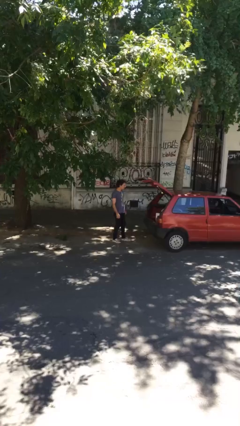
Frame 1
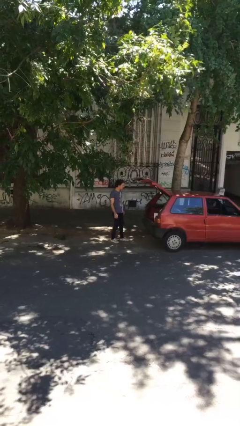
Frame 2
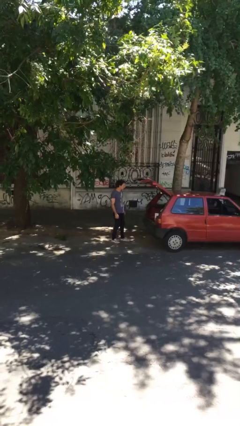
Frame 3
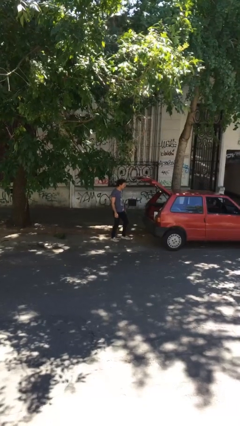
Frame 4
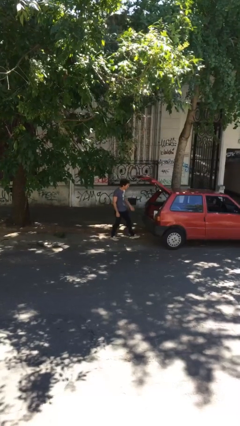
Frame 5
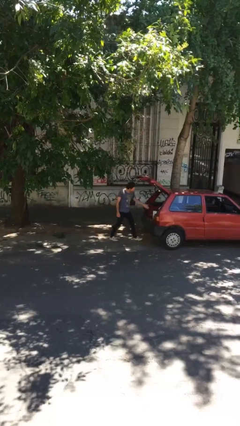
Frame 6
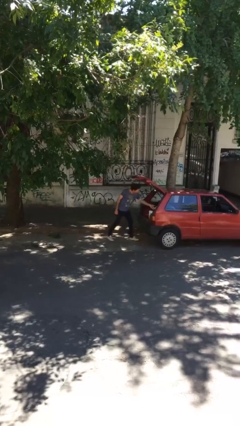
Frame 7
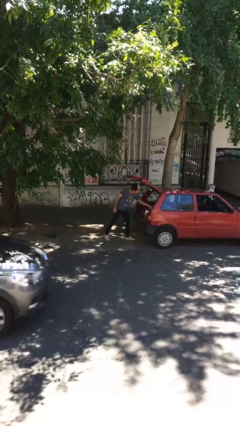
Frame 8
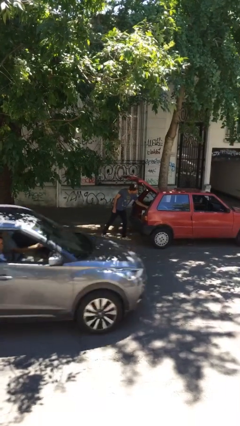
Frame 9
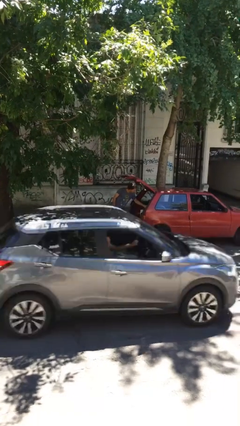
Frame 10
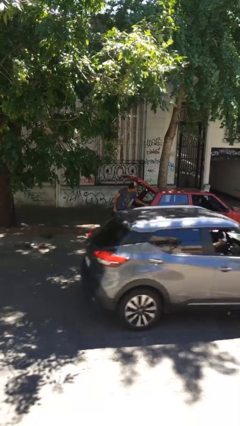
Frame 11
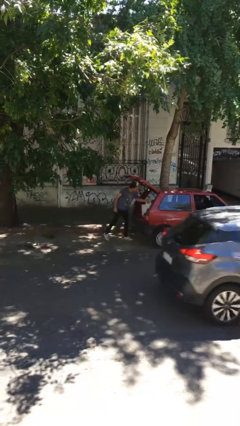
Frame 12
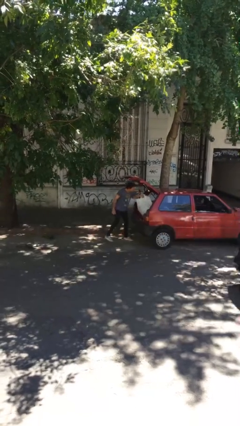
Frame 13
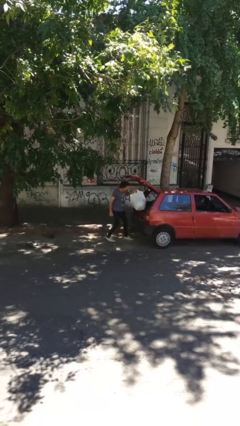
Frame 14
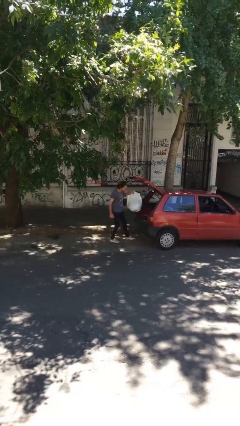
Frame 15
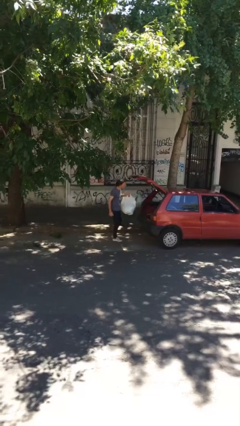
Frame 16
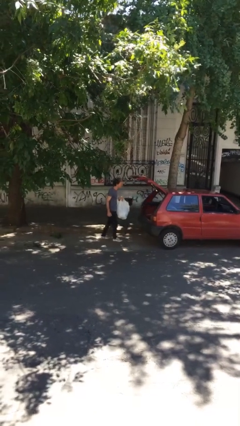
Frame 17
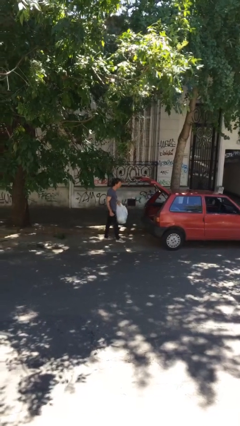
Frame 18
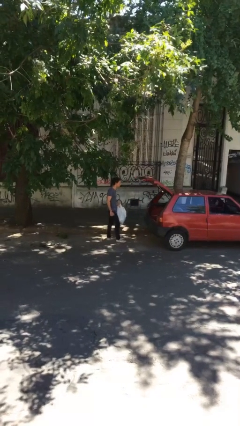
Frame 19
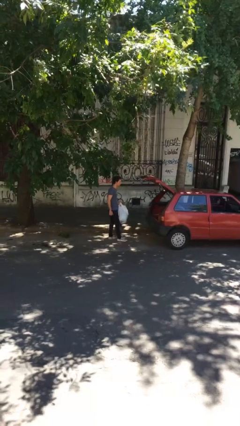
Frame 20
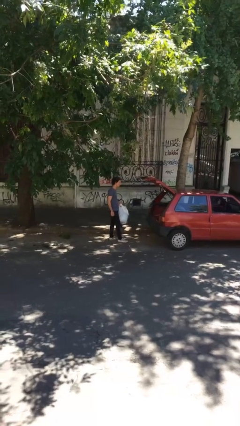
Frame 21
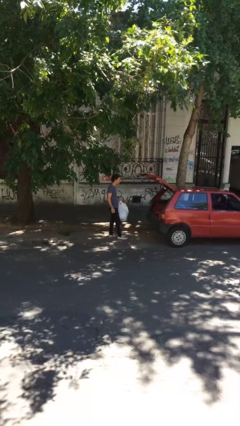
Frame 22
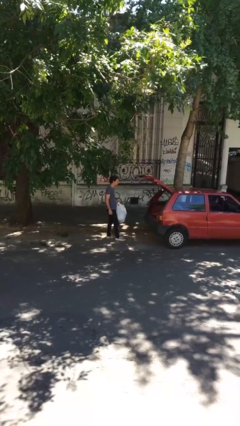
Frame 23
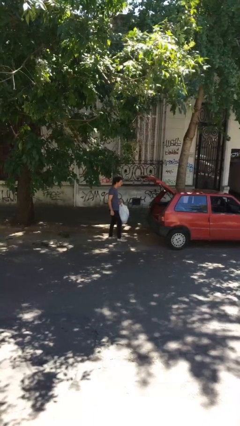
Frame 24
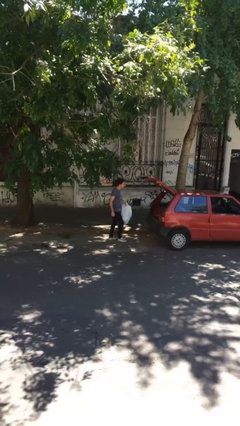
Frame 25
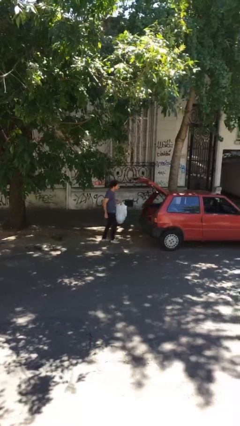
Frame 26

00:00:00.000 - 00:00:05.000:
person unloads car

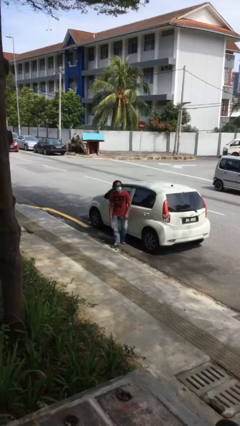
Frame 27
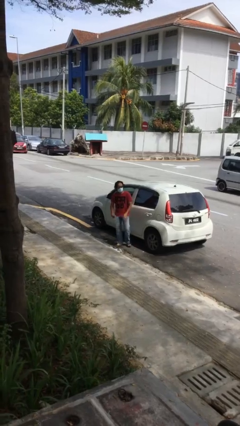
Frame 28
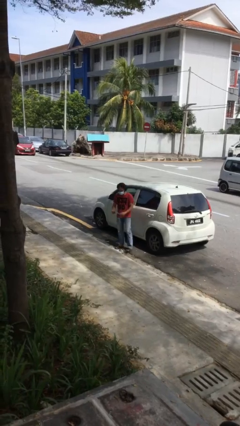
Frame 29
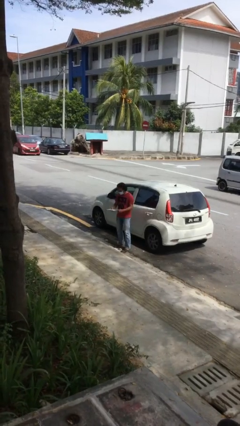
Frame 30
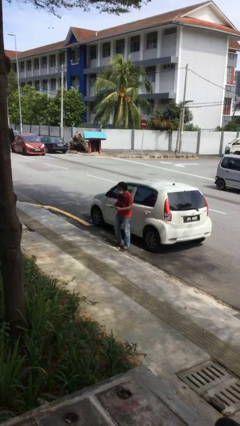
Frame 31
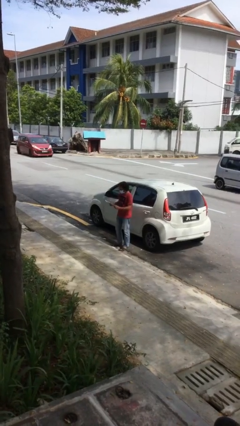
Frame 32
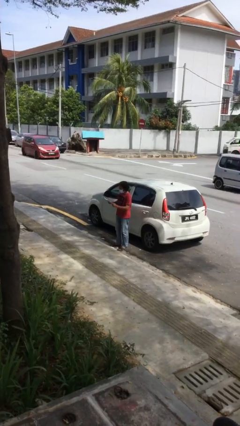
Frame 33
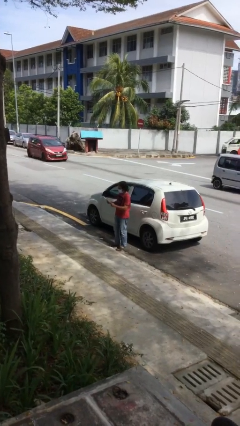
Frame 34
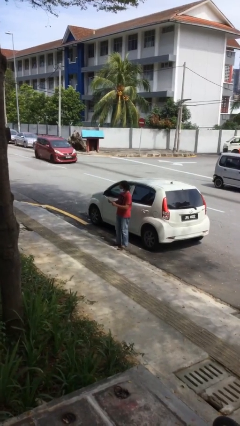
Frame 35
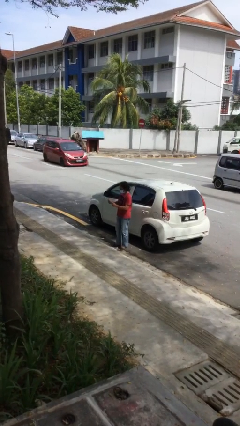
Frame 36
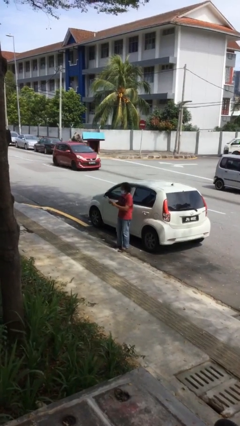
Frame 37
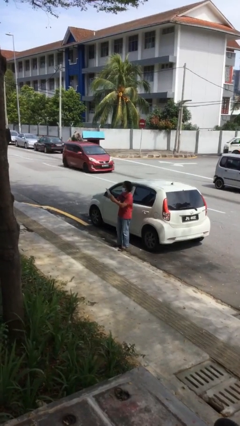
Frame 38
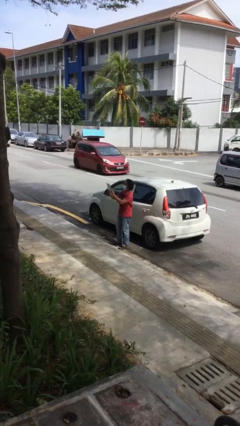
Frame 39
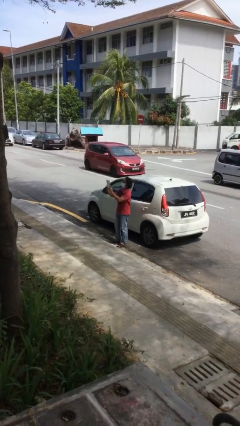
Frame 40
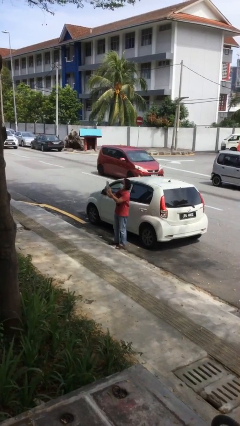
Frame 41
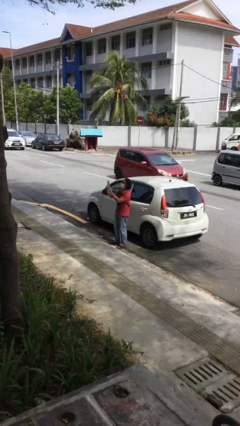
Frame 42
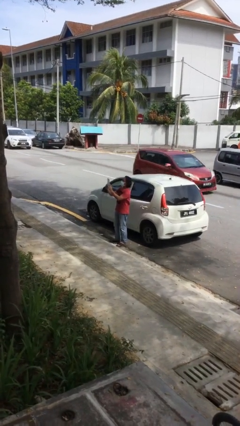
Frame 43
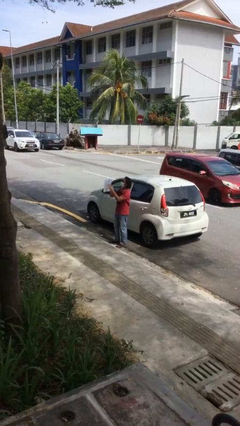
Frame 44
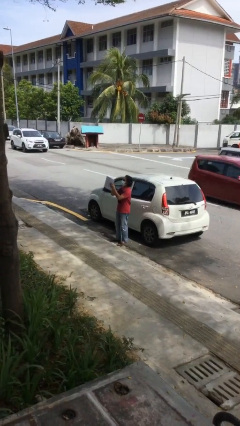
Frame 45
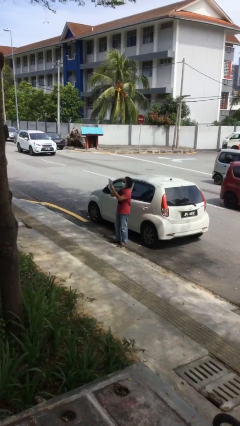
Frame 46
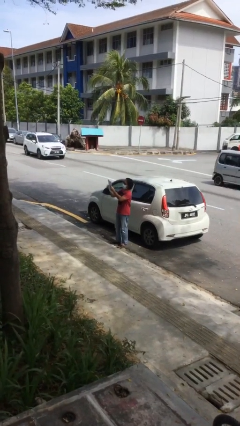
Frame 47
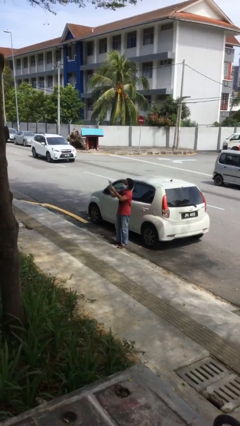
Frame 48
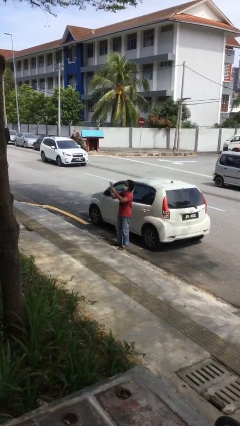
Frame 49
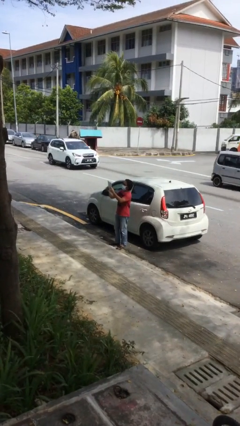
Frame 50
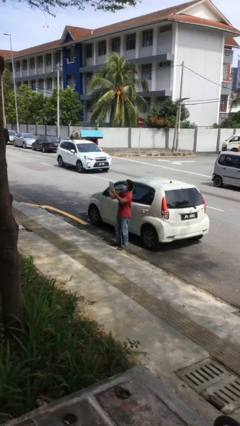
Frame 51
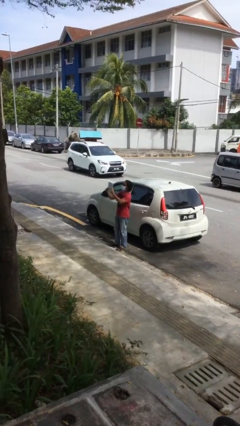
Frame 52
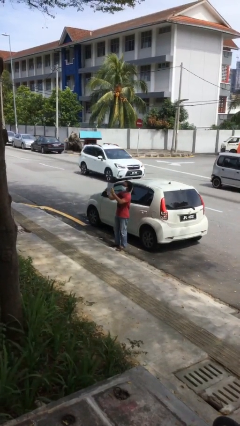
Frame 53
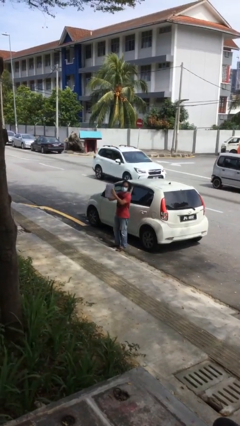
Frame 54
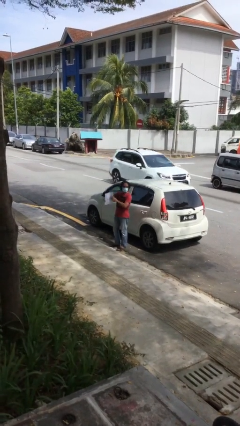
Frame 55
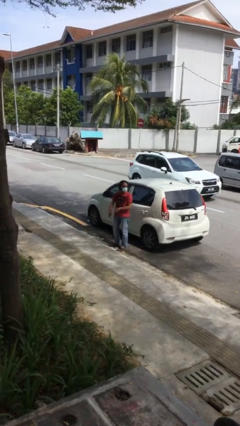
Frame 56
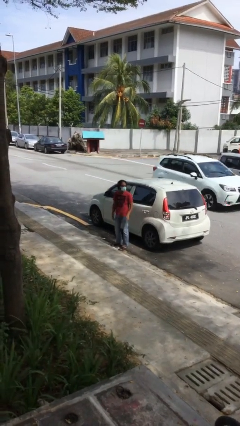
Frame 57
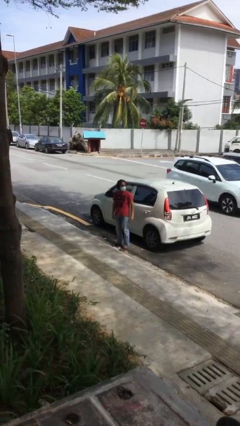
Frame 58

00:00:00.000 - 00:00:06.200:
person reads document

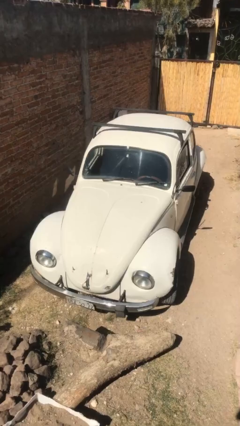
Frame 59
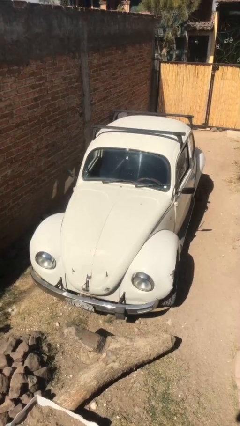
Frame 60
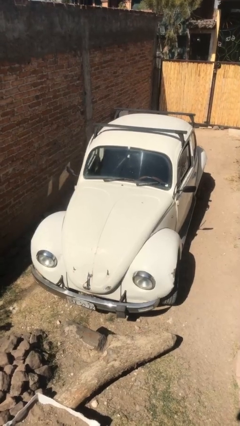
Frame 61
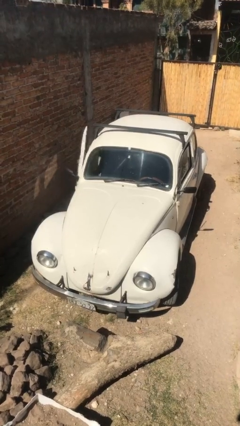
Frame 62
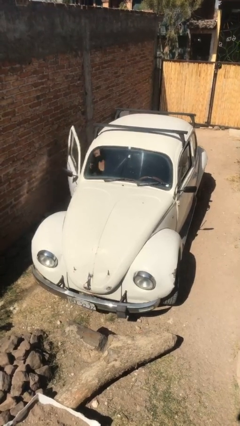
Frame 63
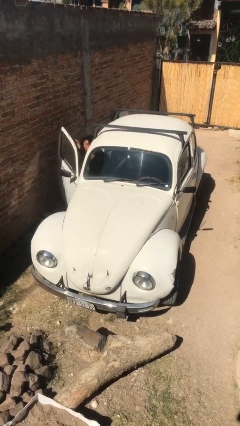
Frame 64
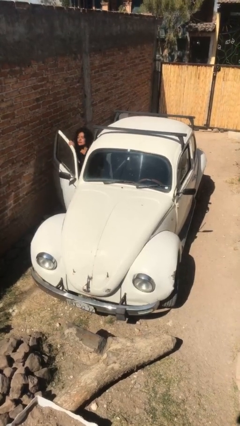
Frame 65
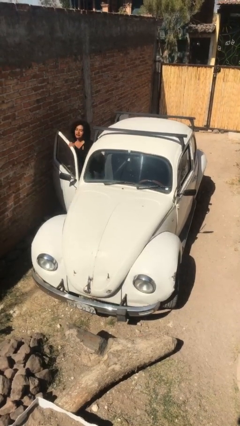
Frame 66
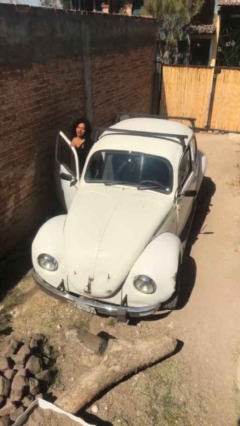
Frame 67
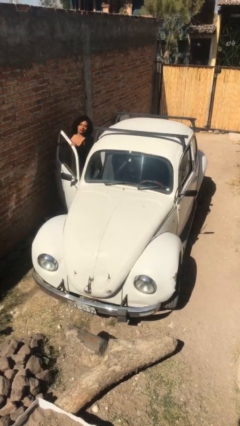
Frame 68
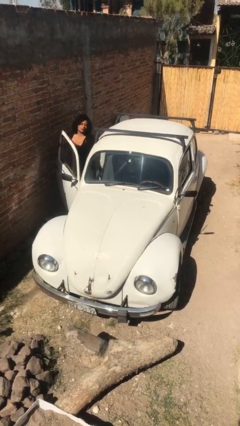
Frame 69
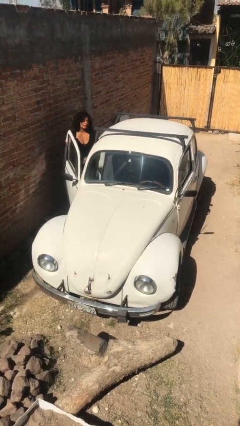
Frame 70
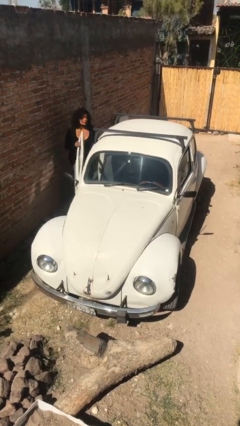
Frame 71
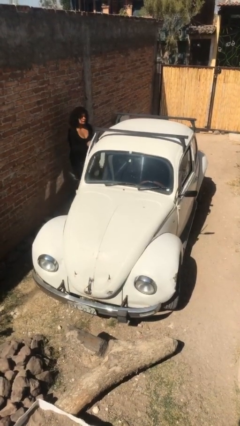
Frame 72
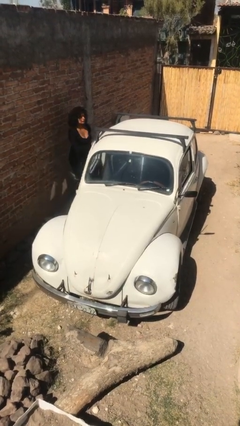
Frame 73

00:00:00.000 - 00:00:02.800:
car drops off person

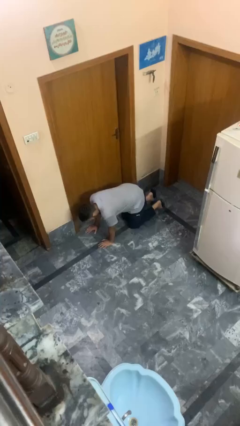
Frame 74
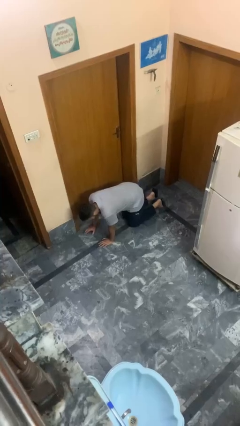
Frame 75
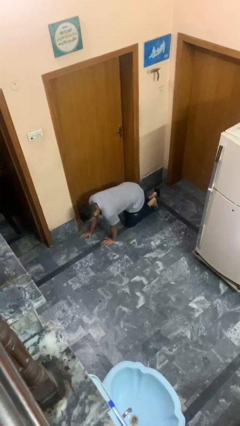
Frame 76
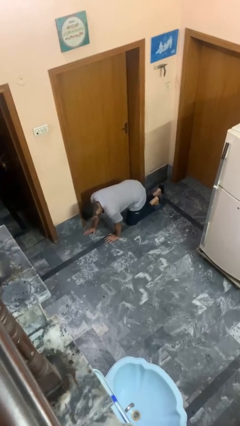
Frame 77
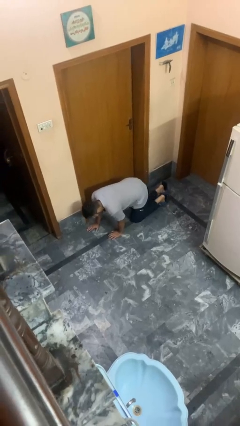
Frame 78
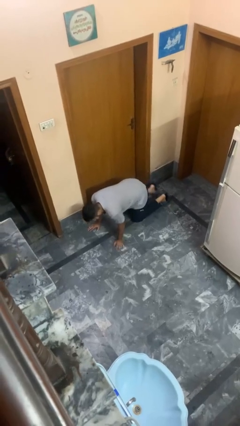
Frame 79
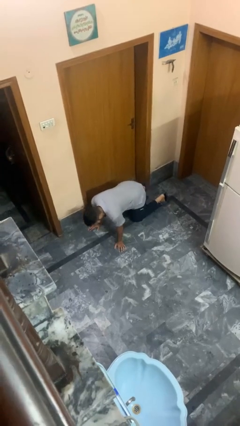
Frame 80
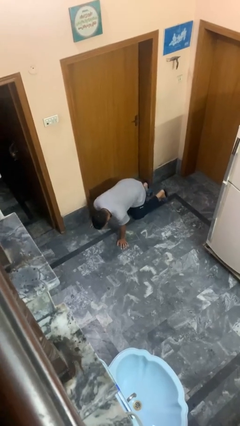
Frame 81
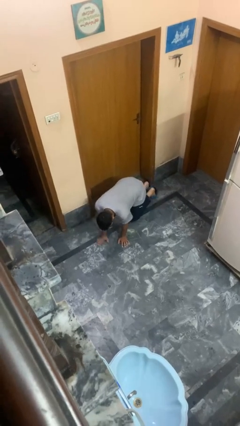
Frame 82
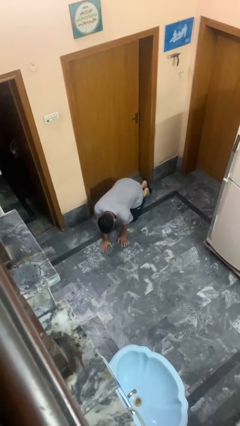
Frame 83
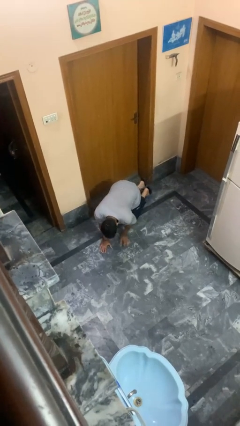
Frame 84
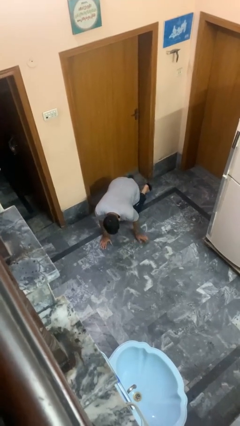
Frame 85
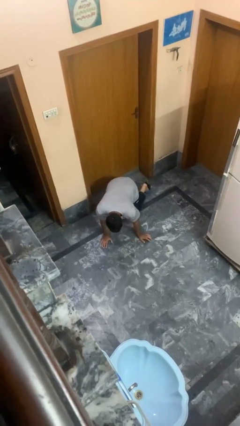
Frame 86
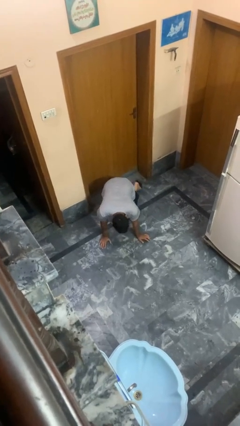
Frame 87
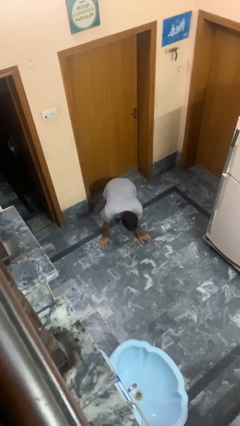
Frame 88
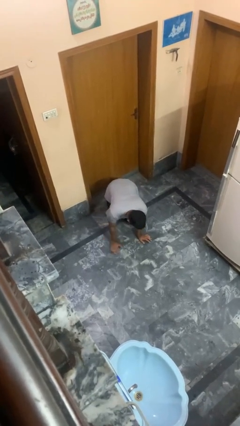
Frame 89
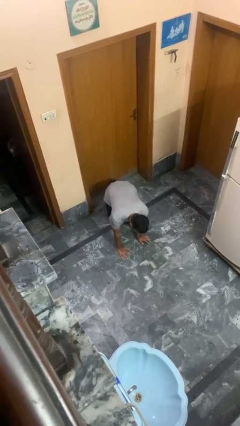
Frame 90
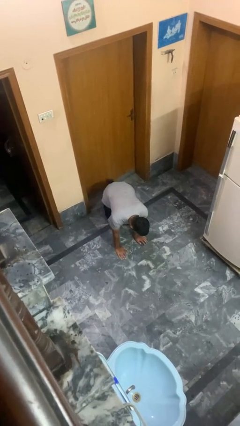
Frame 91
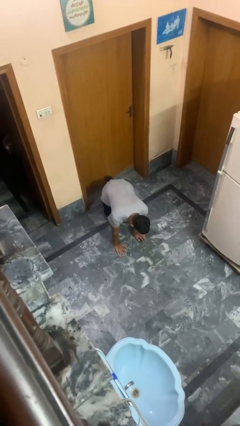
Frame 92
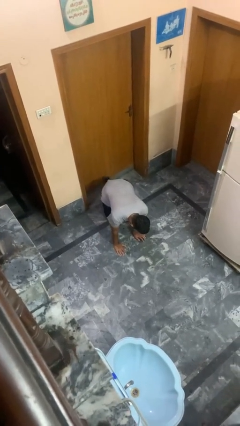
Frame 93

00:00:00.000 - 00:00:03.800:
person crawls
